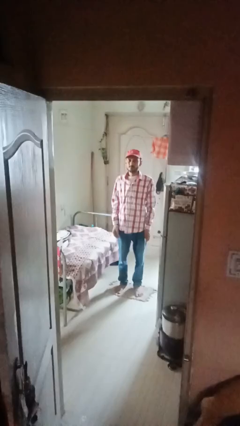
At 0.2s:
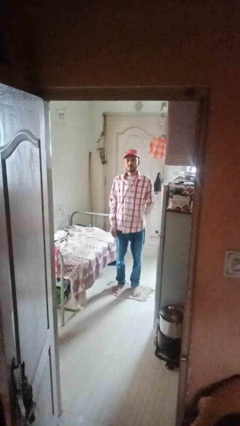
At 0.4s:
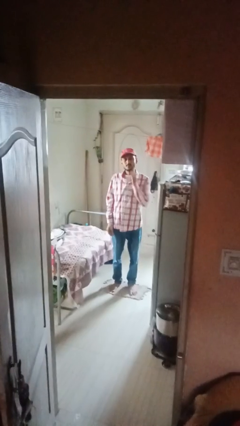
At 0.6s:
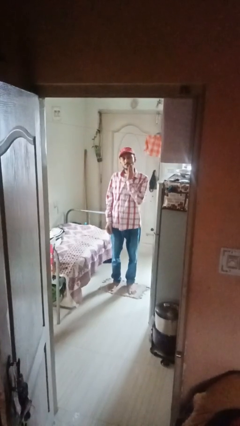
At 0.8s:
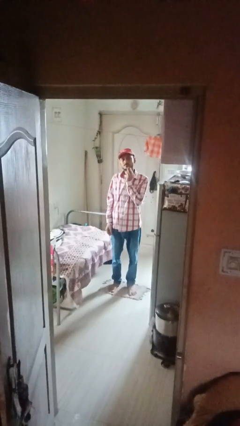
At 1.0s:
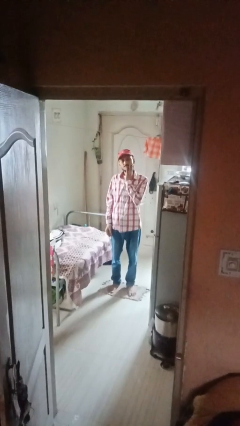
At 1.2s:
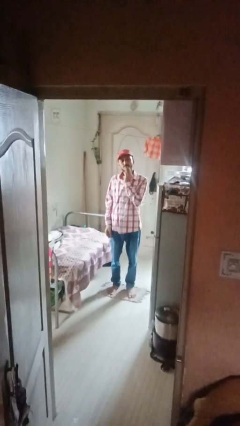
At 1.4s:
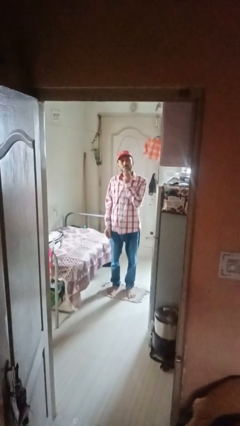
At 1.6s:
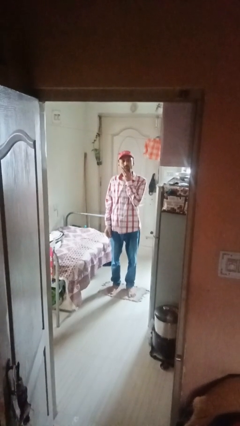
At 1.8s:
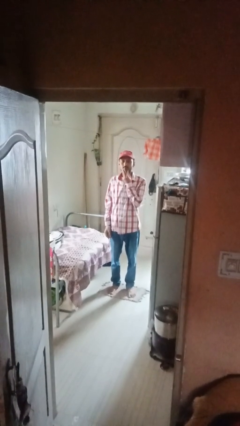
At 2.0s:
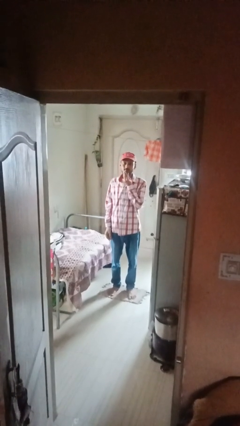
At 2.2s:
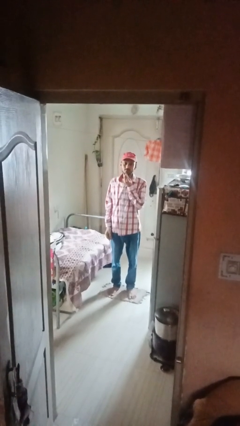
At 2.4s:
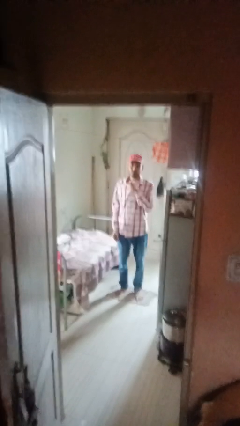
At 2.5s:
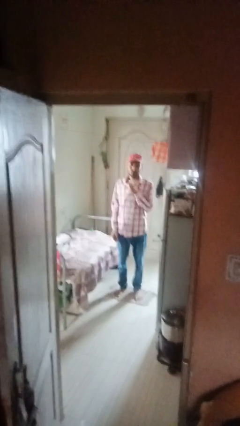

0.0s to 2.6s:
person strokes chin

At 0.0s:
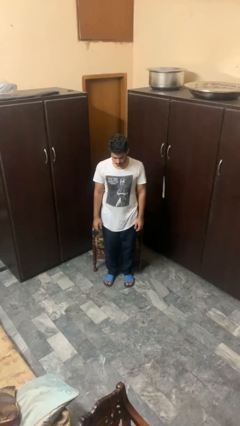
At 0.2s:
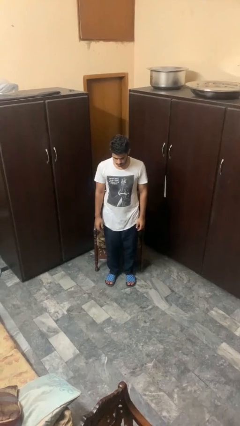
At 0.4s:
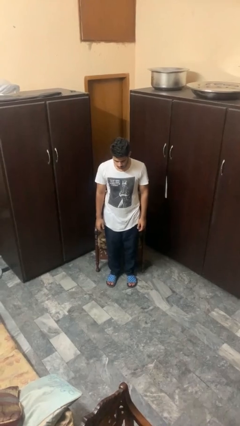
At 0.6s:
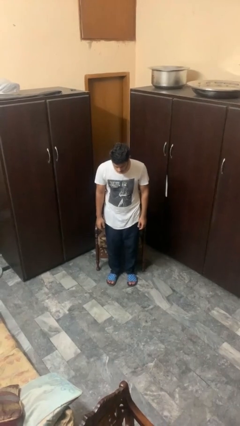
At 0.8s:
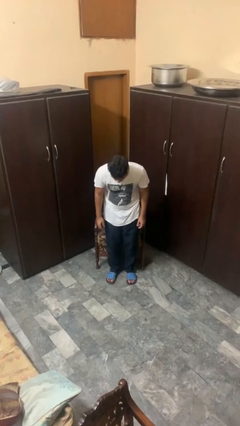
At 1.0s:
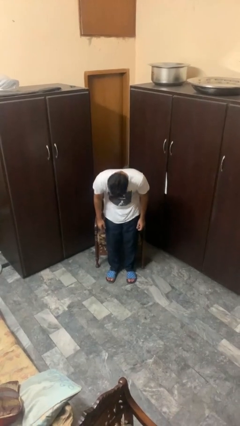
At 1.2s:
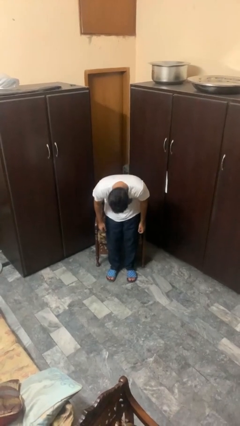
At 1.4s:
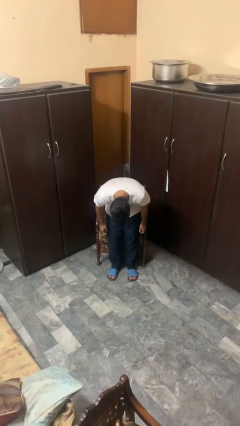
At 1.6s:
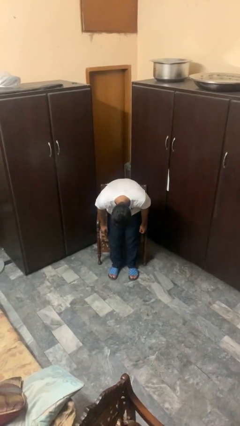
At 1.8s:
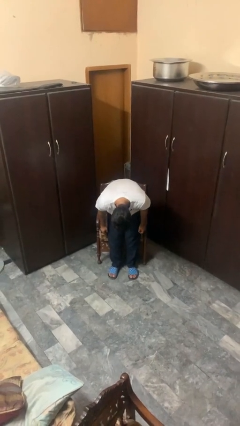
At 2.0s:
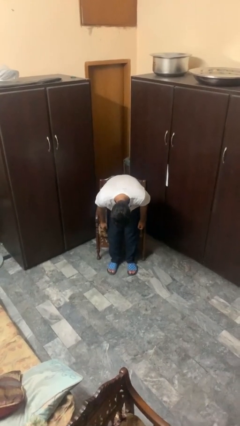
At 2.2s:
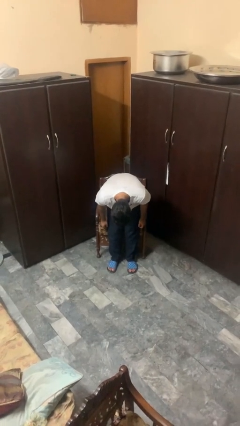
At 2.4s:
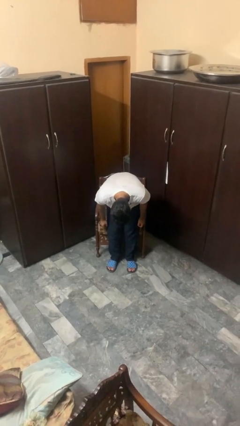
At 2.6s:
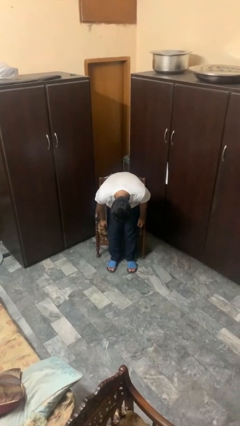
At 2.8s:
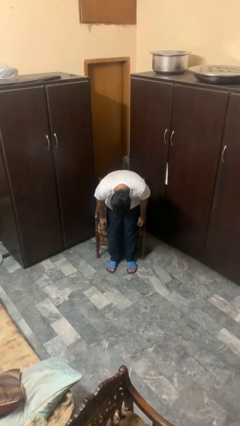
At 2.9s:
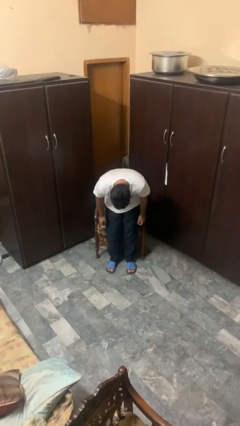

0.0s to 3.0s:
person bows

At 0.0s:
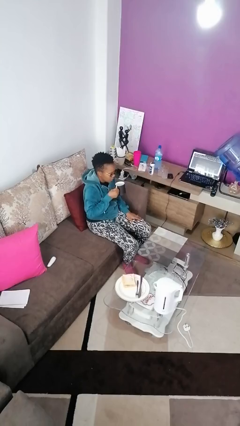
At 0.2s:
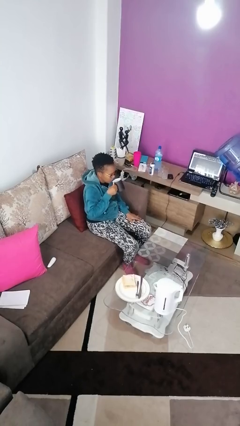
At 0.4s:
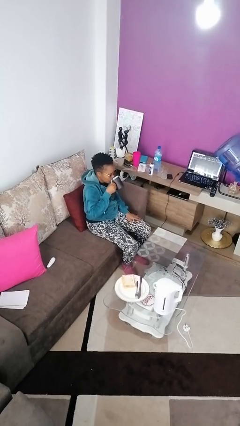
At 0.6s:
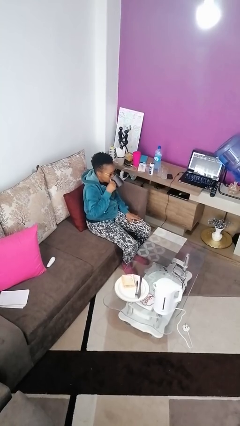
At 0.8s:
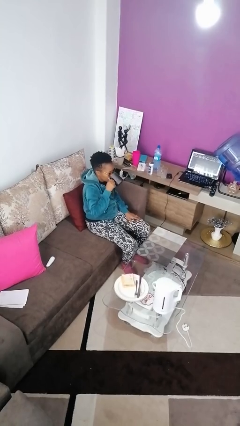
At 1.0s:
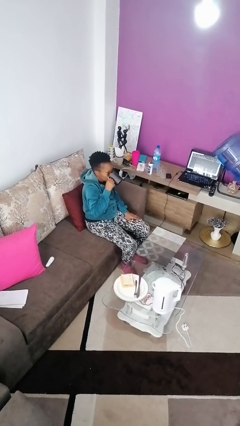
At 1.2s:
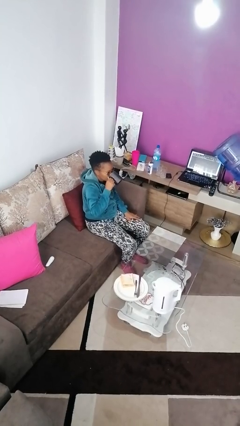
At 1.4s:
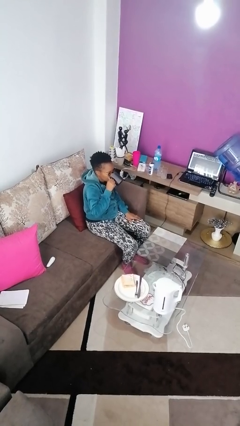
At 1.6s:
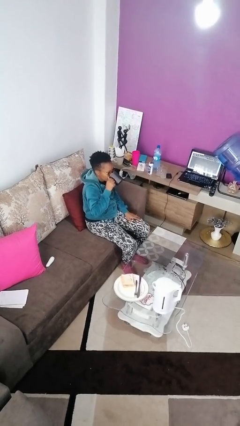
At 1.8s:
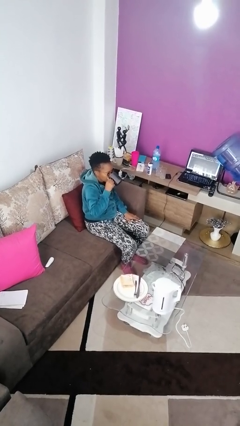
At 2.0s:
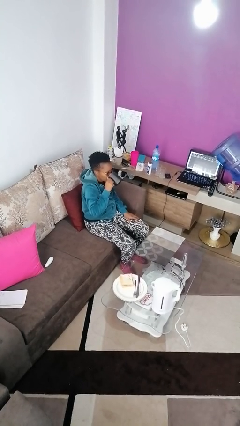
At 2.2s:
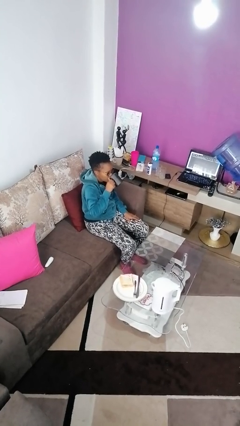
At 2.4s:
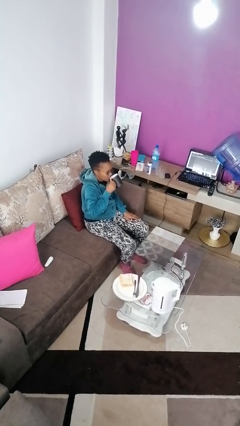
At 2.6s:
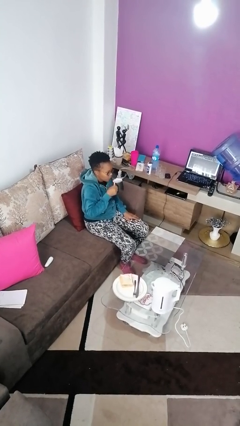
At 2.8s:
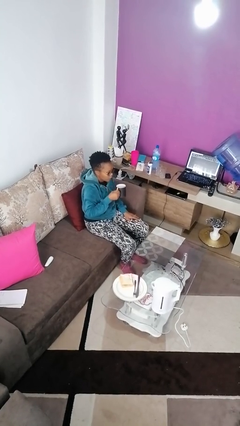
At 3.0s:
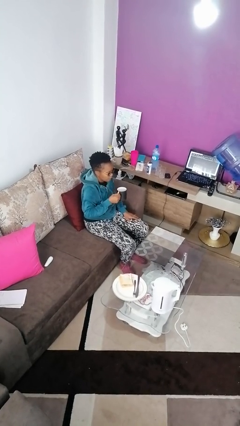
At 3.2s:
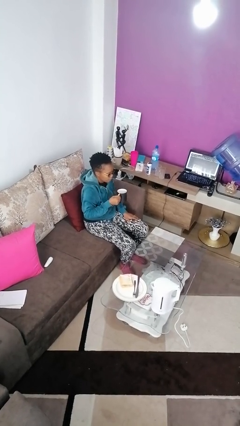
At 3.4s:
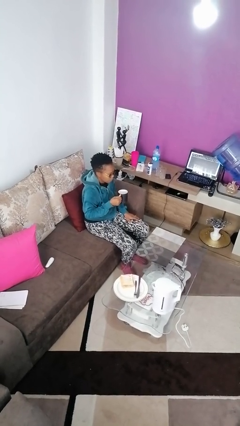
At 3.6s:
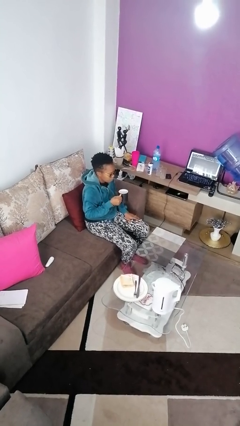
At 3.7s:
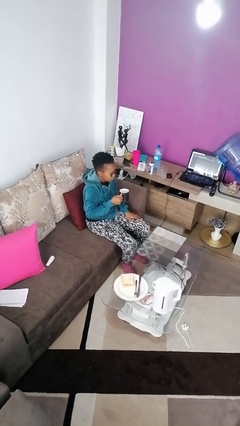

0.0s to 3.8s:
person drinks from mug

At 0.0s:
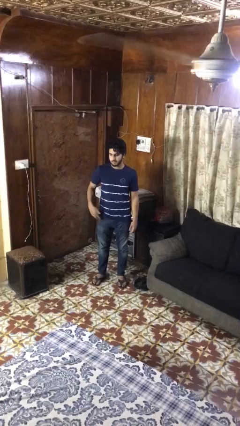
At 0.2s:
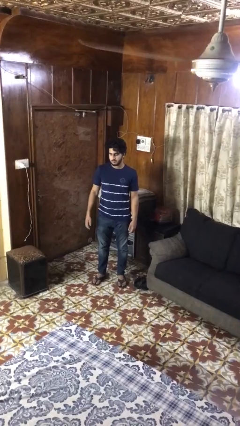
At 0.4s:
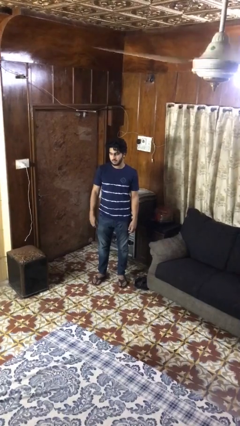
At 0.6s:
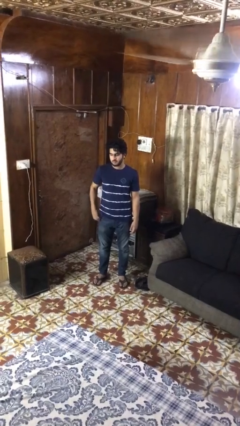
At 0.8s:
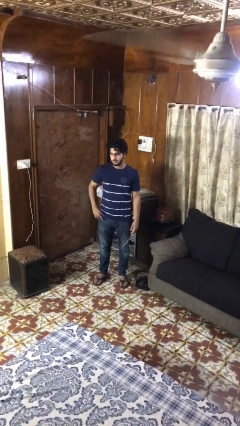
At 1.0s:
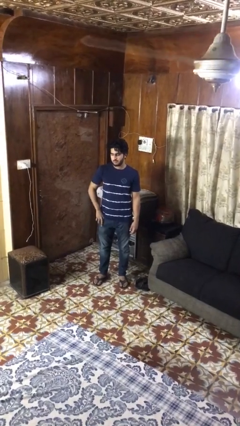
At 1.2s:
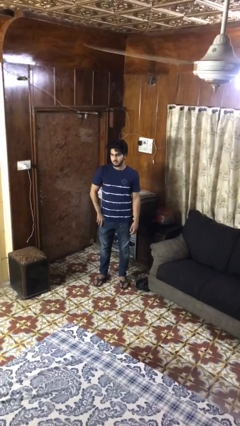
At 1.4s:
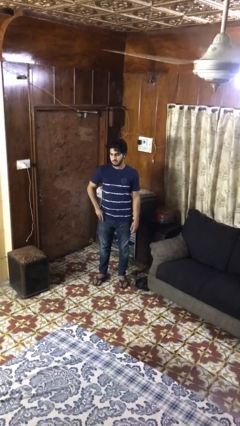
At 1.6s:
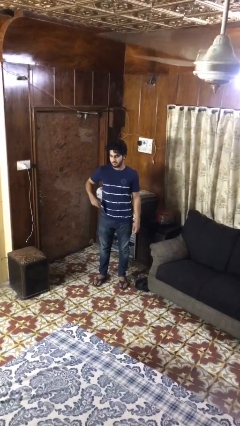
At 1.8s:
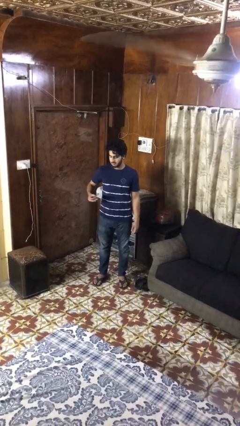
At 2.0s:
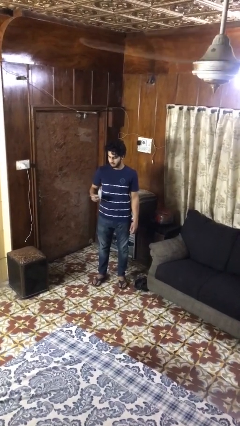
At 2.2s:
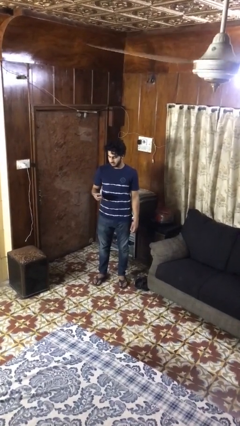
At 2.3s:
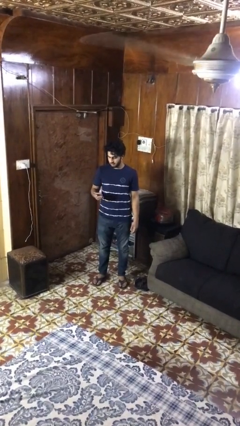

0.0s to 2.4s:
person takes phone from pocket

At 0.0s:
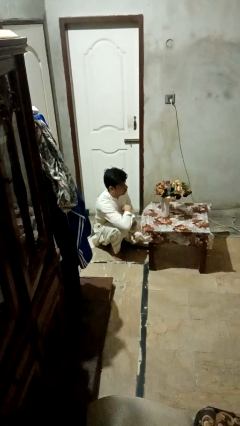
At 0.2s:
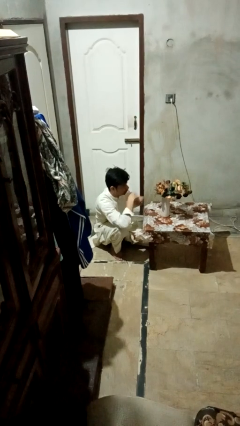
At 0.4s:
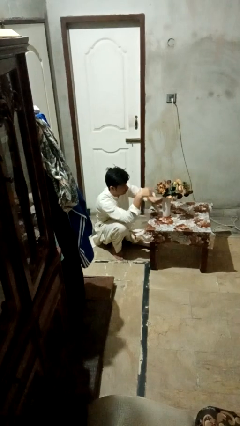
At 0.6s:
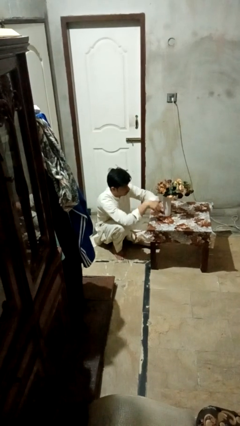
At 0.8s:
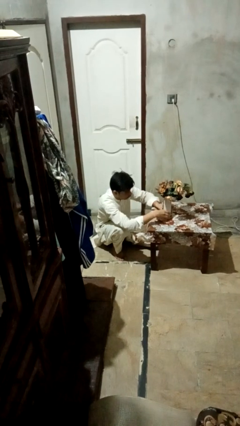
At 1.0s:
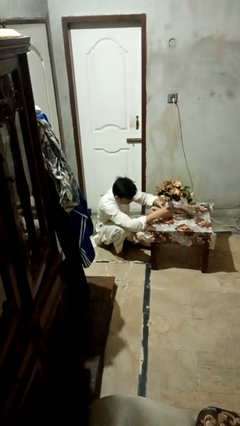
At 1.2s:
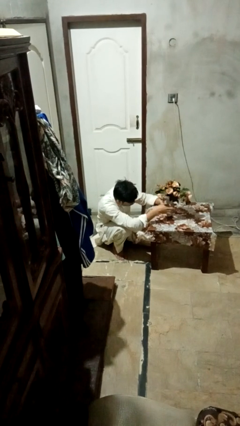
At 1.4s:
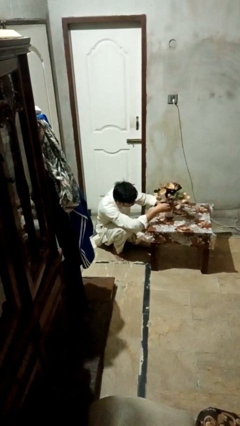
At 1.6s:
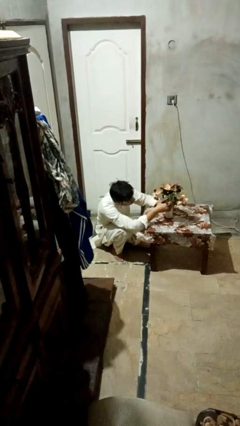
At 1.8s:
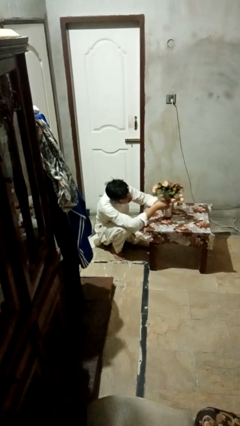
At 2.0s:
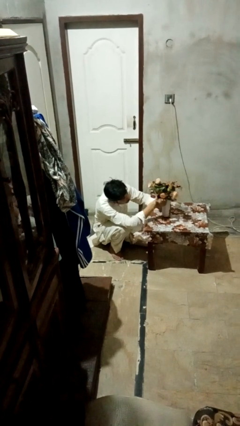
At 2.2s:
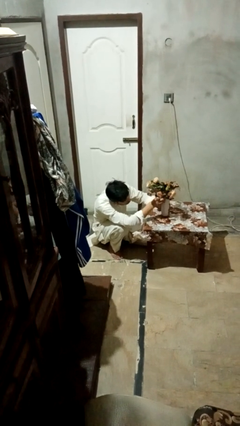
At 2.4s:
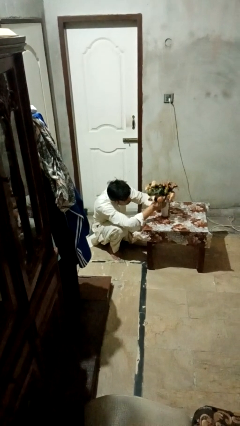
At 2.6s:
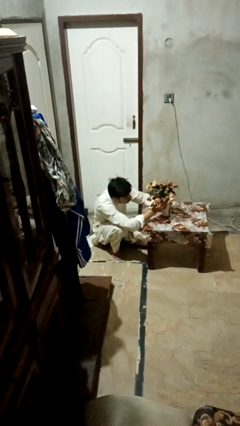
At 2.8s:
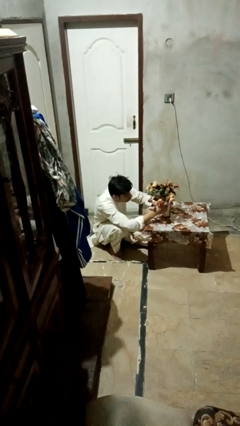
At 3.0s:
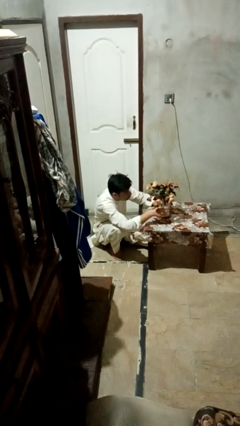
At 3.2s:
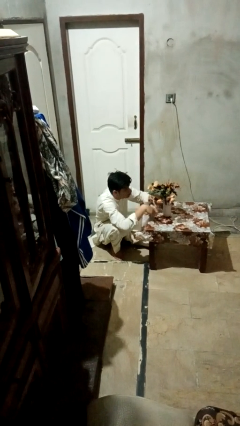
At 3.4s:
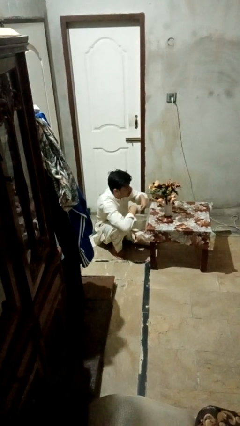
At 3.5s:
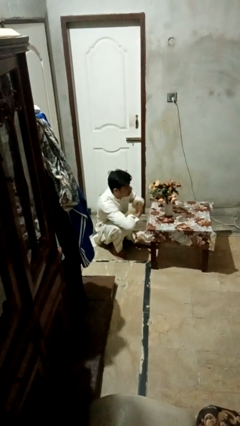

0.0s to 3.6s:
person arranges flowers in vase

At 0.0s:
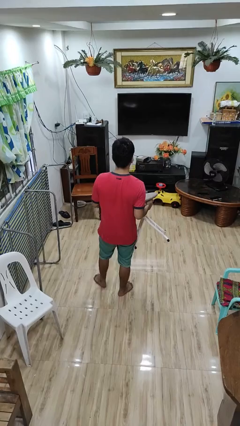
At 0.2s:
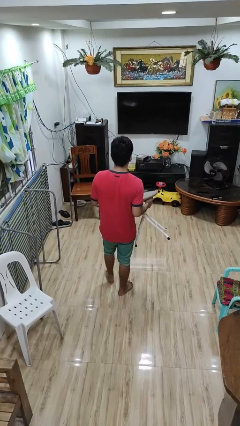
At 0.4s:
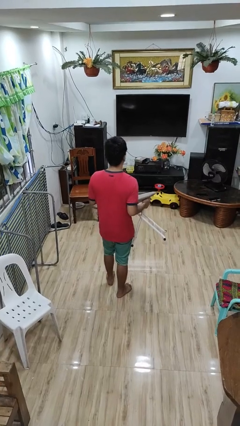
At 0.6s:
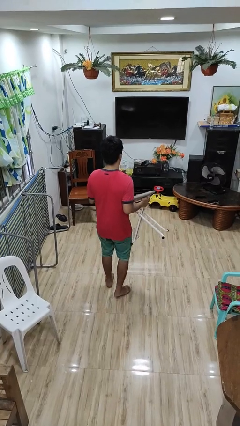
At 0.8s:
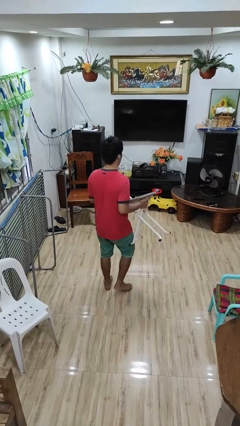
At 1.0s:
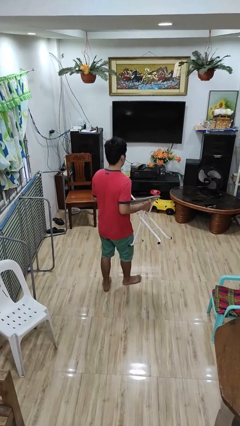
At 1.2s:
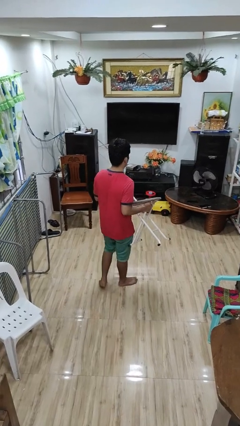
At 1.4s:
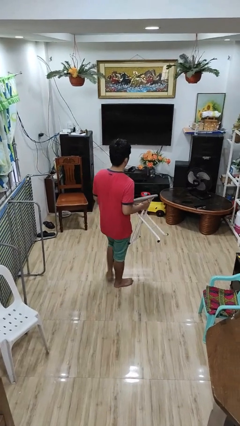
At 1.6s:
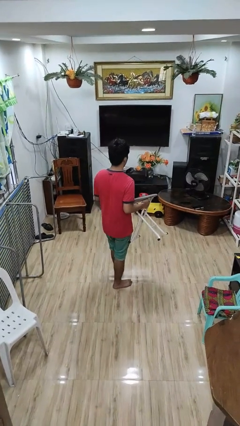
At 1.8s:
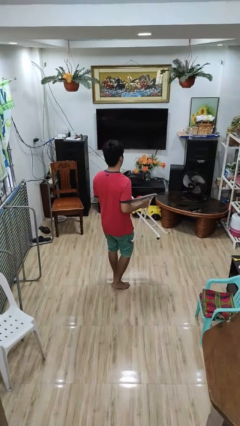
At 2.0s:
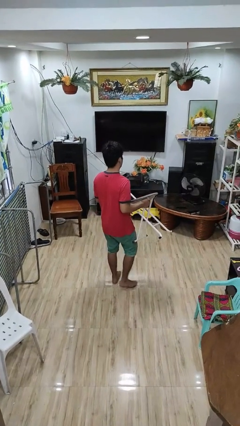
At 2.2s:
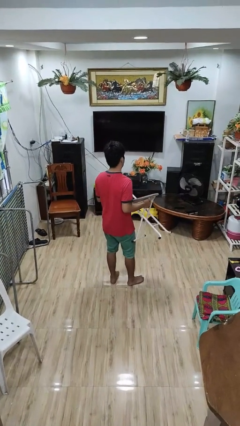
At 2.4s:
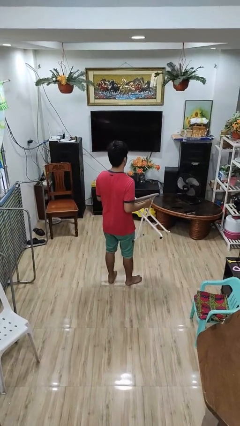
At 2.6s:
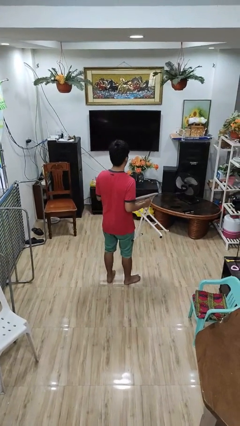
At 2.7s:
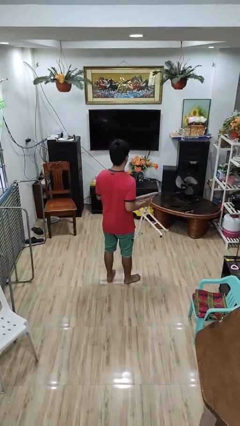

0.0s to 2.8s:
person carries furniture
